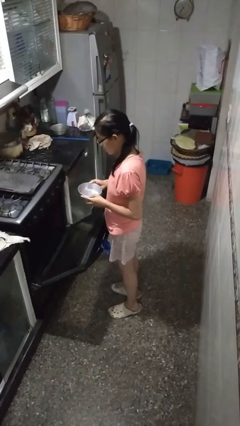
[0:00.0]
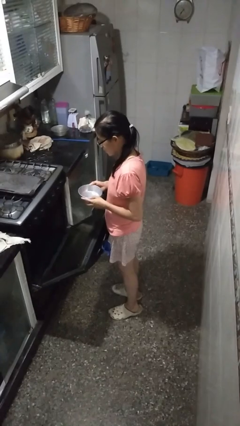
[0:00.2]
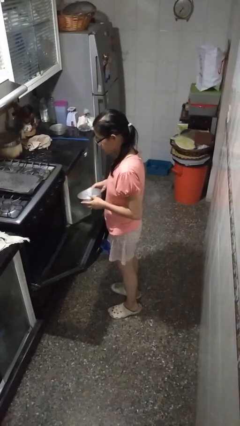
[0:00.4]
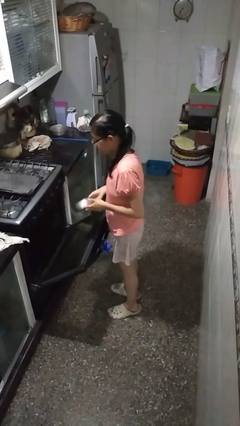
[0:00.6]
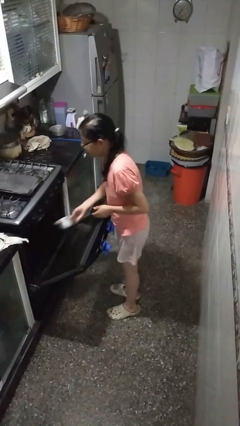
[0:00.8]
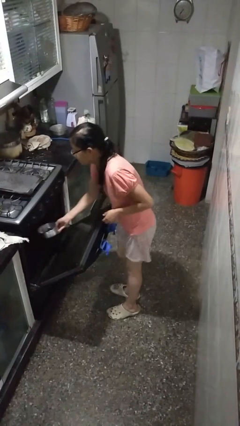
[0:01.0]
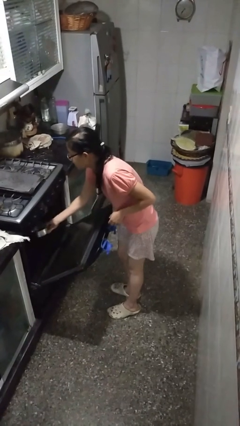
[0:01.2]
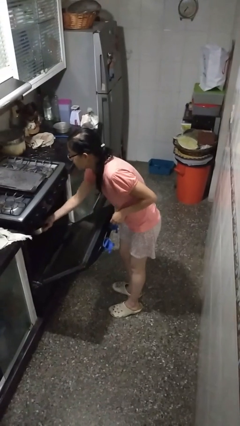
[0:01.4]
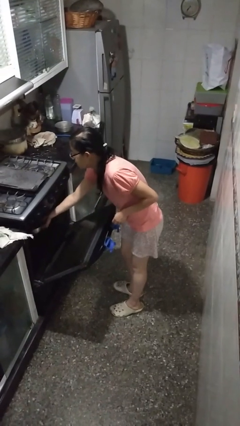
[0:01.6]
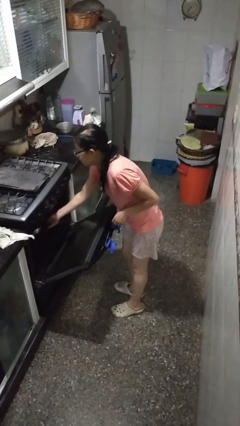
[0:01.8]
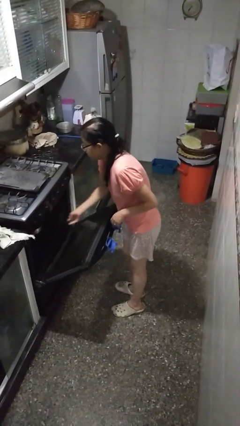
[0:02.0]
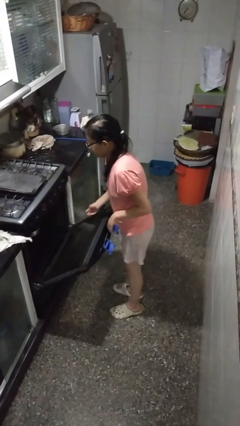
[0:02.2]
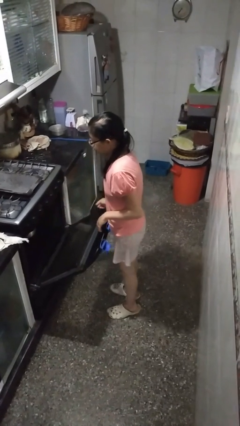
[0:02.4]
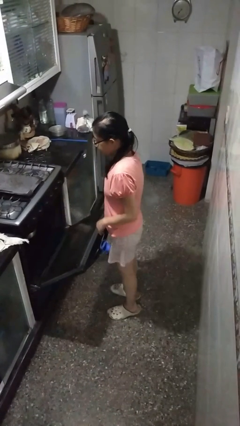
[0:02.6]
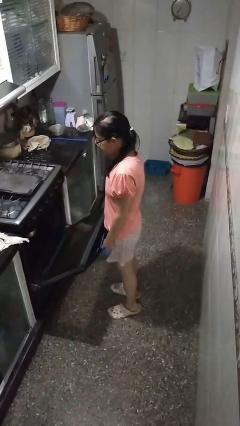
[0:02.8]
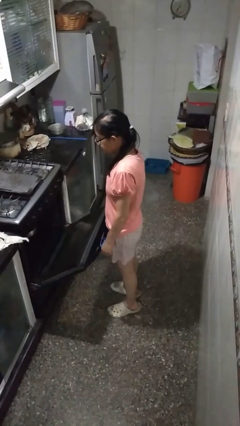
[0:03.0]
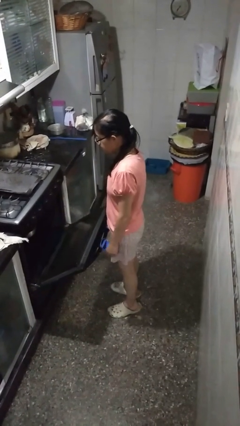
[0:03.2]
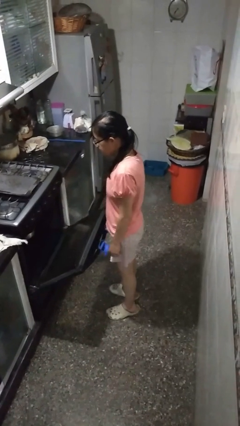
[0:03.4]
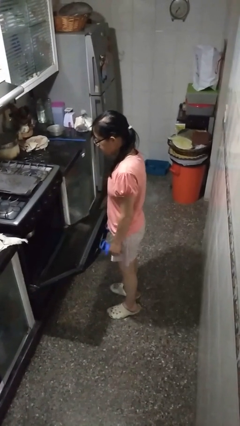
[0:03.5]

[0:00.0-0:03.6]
person puts object into oven

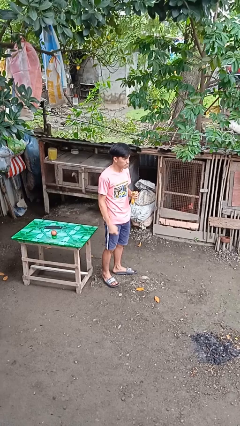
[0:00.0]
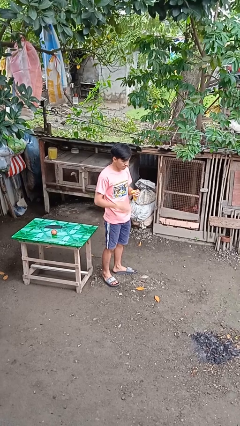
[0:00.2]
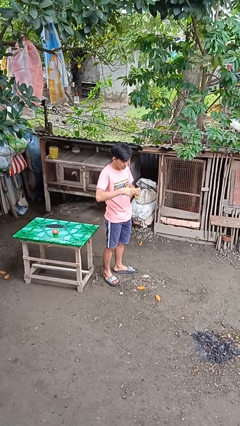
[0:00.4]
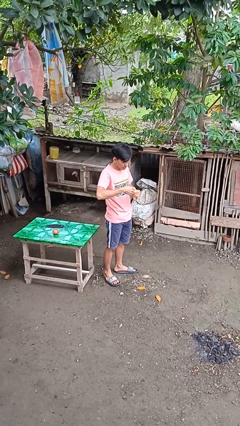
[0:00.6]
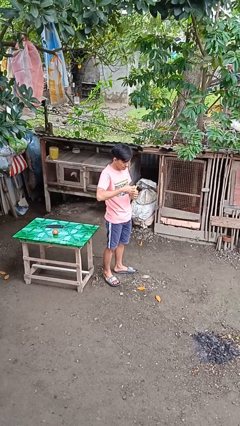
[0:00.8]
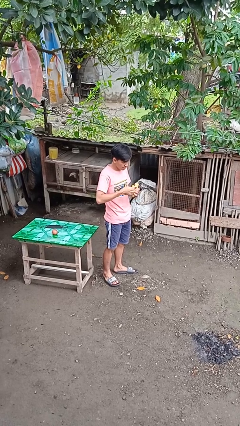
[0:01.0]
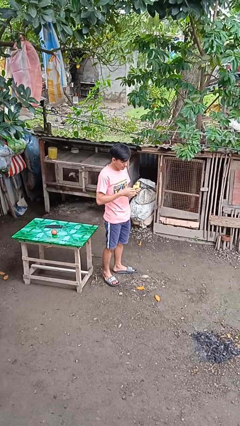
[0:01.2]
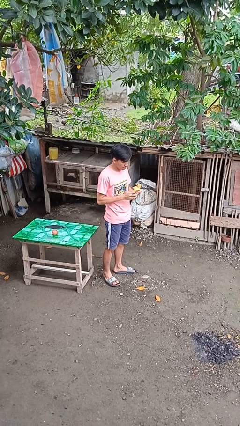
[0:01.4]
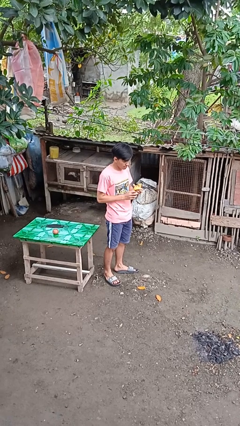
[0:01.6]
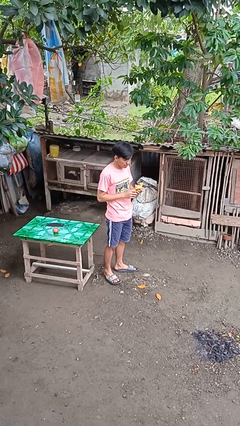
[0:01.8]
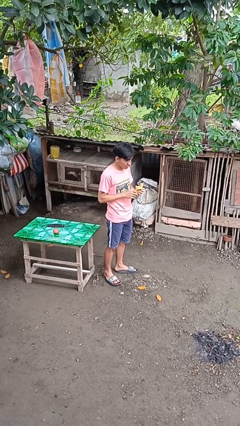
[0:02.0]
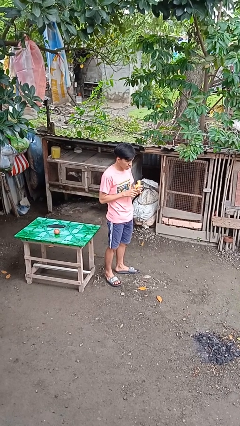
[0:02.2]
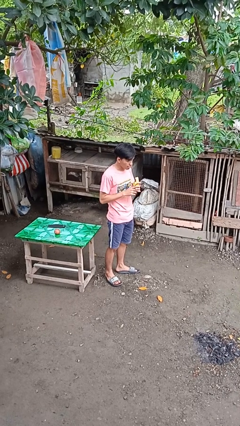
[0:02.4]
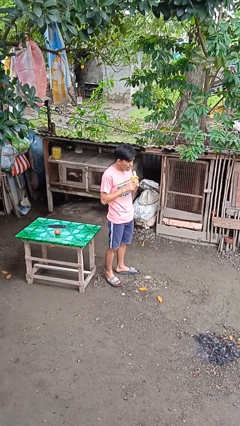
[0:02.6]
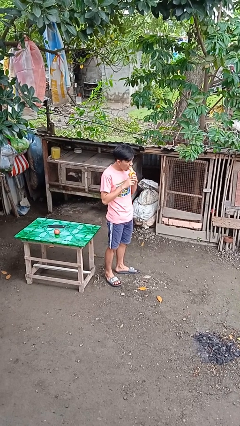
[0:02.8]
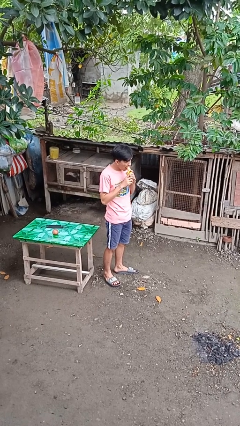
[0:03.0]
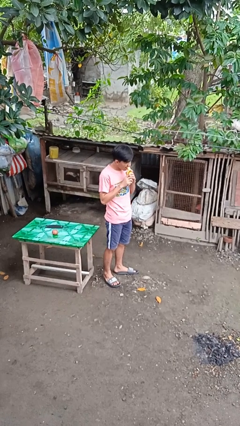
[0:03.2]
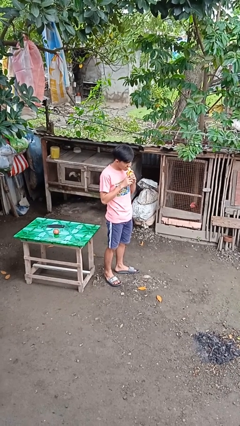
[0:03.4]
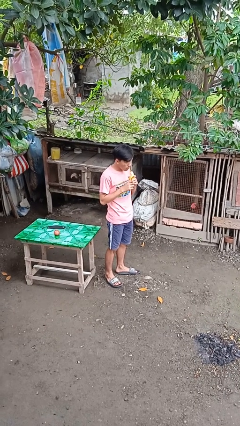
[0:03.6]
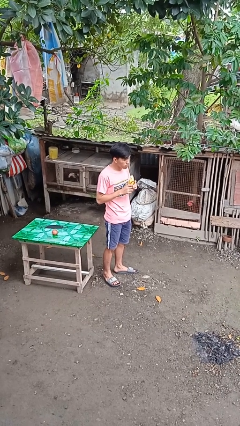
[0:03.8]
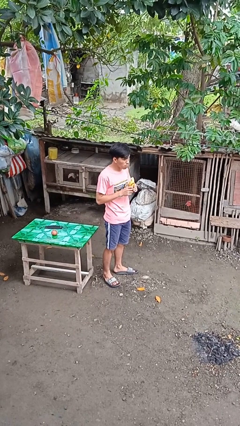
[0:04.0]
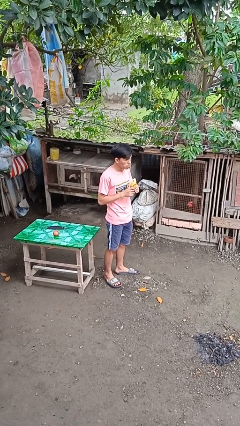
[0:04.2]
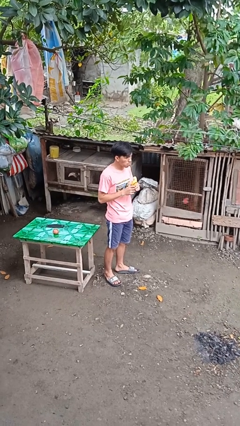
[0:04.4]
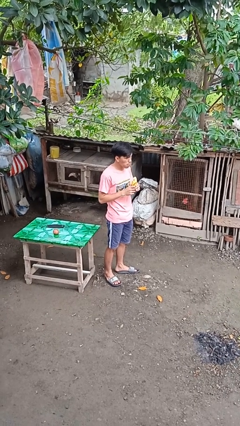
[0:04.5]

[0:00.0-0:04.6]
person eats banana

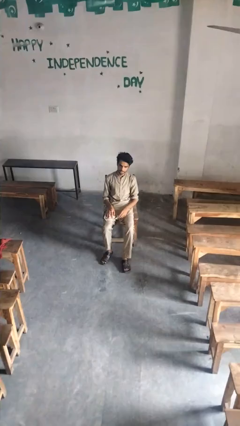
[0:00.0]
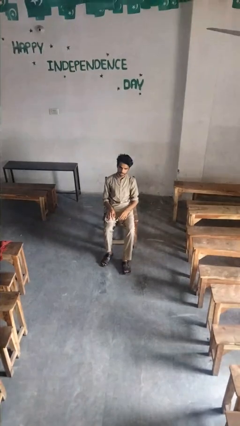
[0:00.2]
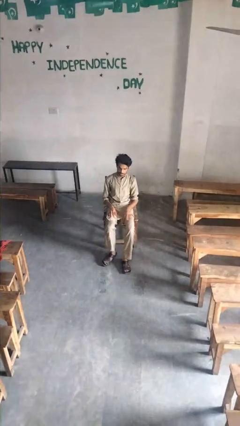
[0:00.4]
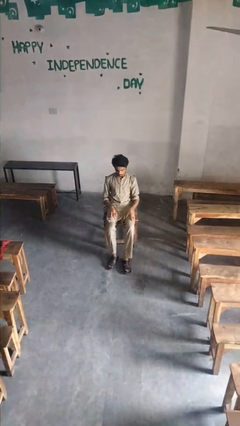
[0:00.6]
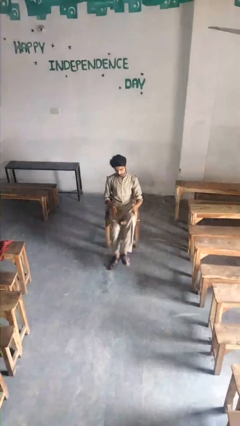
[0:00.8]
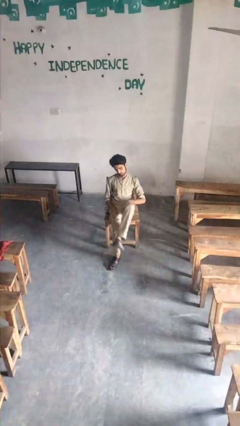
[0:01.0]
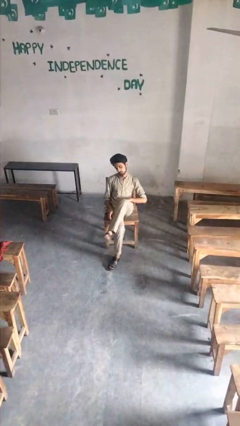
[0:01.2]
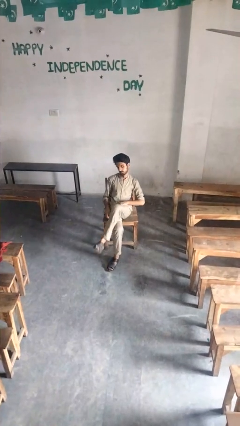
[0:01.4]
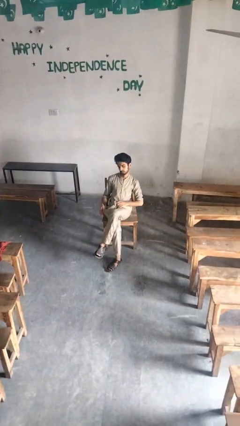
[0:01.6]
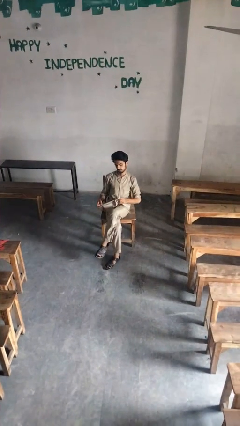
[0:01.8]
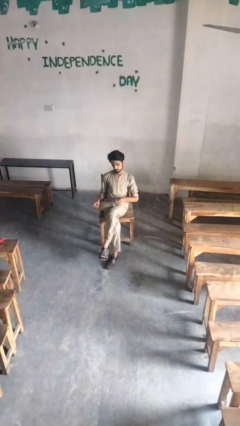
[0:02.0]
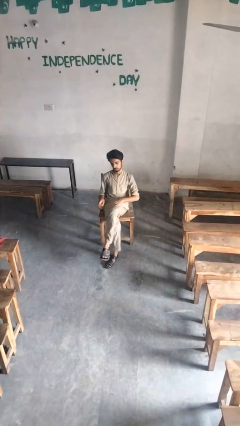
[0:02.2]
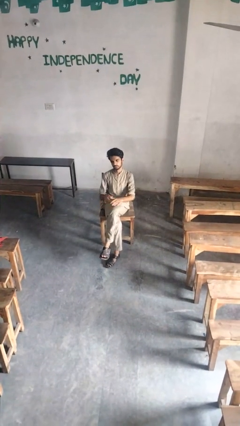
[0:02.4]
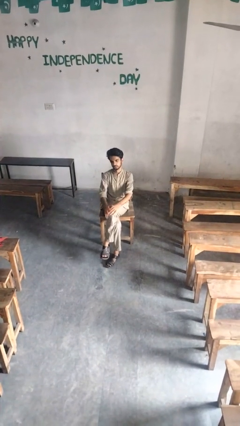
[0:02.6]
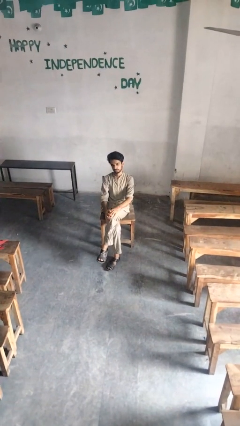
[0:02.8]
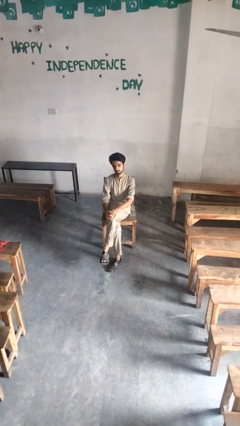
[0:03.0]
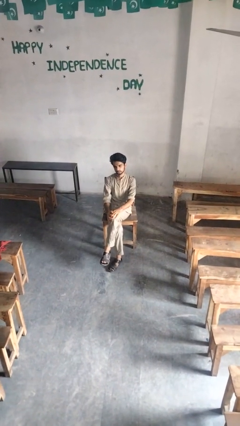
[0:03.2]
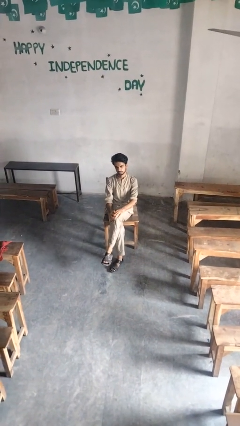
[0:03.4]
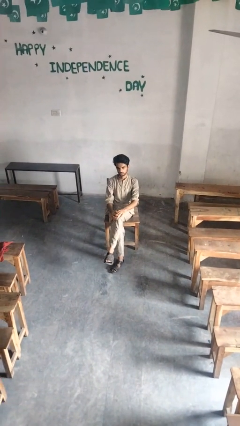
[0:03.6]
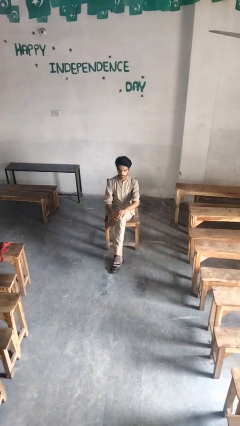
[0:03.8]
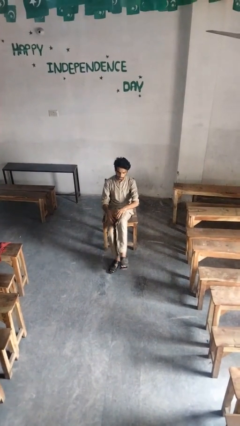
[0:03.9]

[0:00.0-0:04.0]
person crosses legs

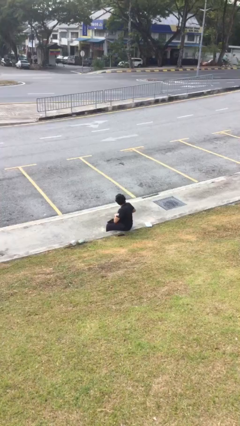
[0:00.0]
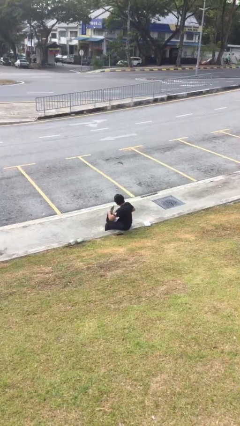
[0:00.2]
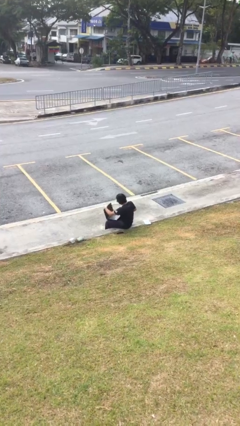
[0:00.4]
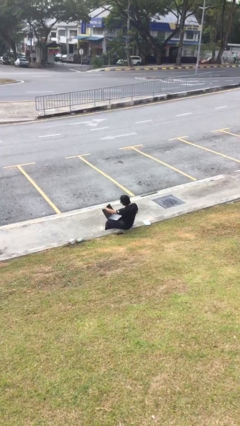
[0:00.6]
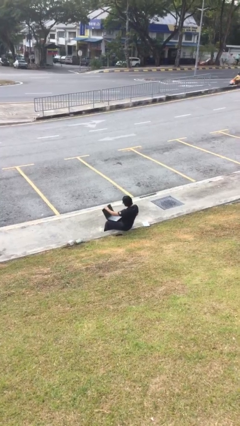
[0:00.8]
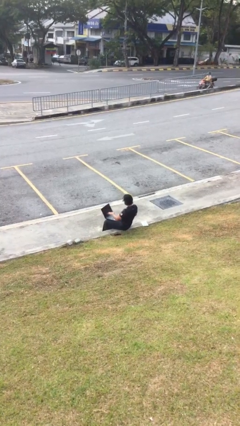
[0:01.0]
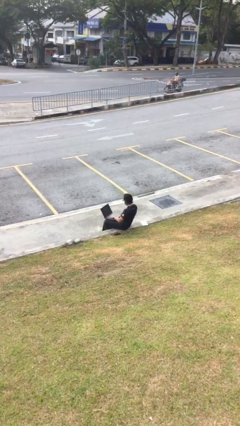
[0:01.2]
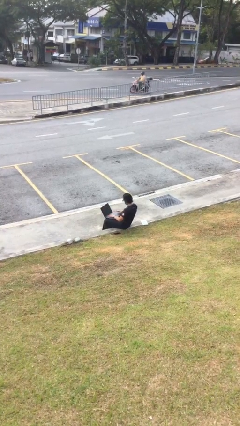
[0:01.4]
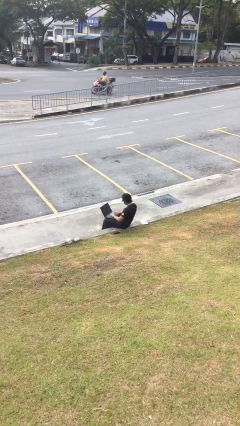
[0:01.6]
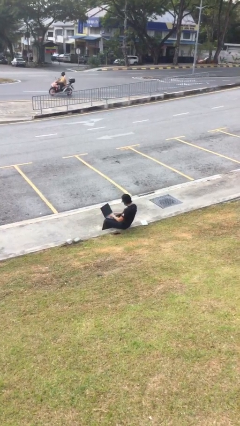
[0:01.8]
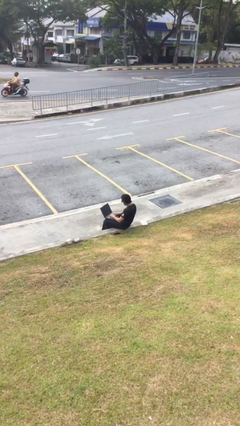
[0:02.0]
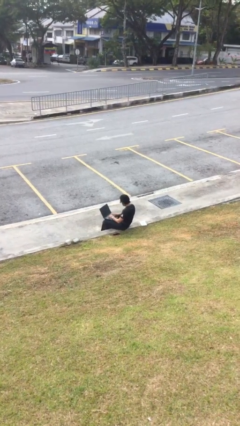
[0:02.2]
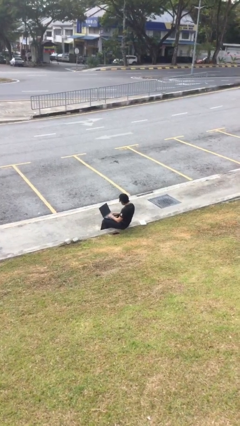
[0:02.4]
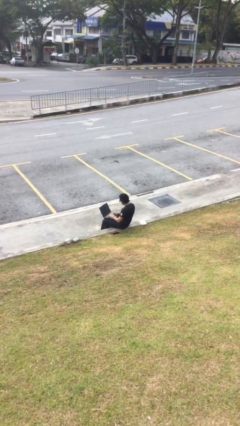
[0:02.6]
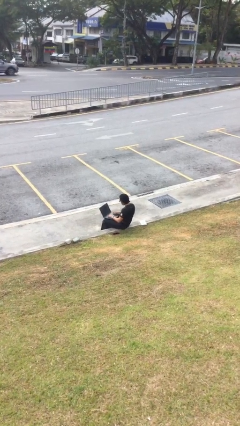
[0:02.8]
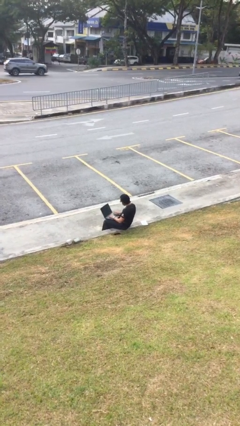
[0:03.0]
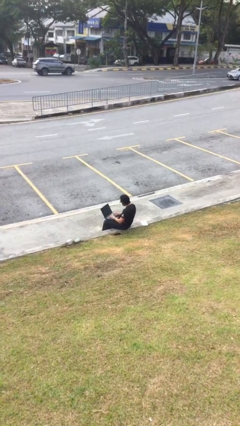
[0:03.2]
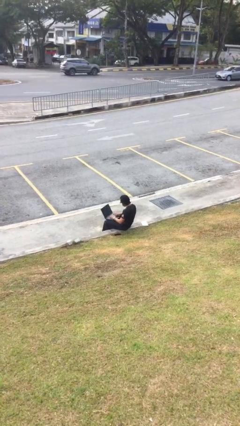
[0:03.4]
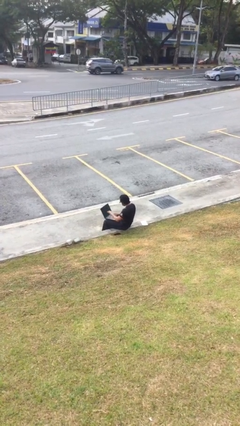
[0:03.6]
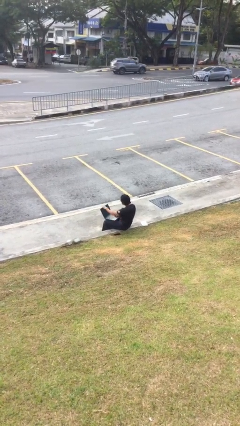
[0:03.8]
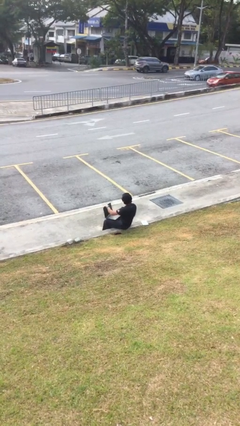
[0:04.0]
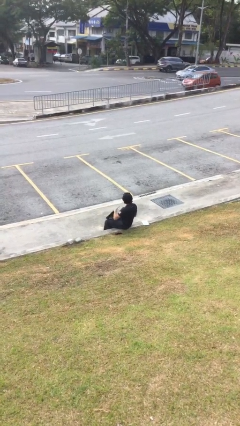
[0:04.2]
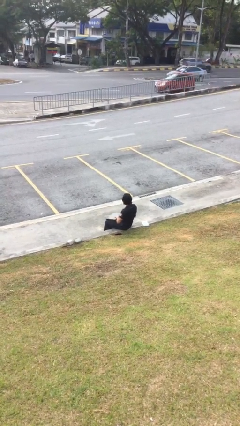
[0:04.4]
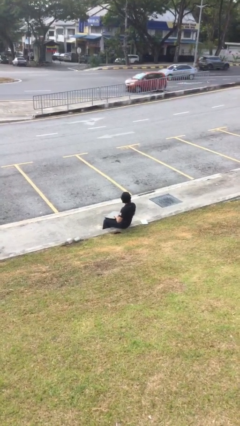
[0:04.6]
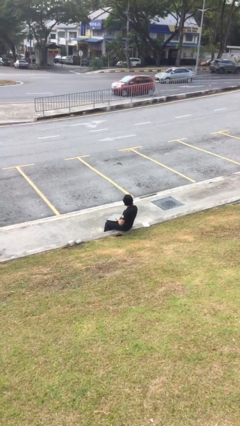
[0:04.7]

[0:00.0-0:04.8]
person interacts with laptop

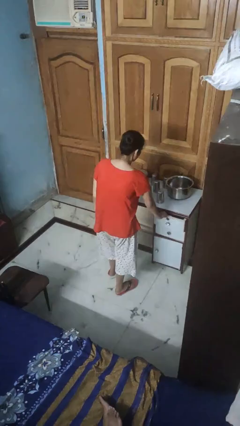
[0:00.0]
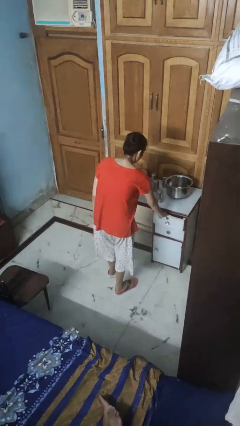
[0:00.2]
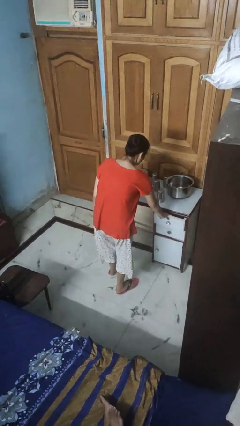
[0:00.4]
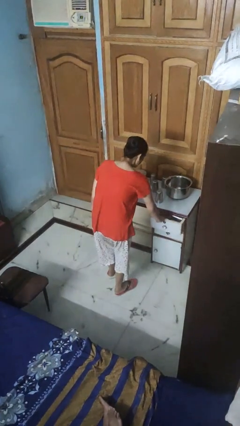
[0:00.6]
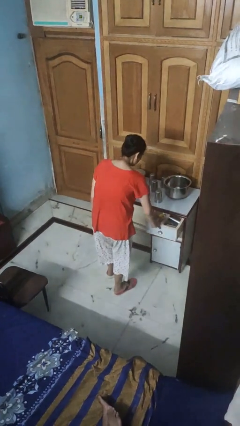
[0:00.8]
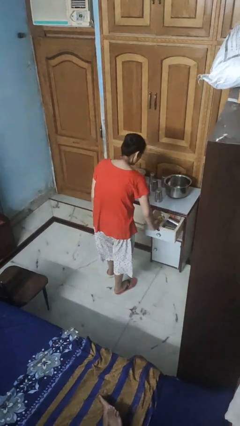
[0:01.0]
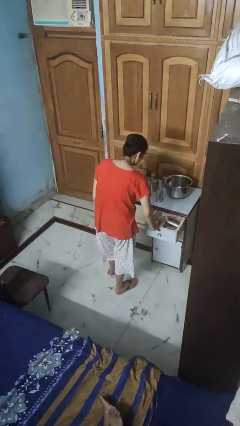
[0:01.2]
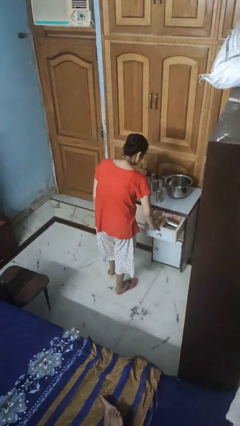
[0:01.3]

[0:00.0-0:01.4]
person opens kitchen drawer
